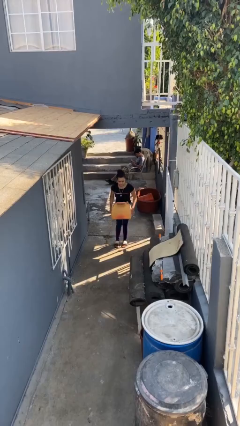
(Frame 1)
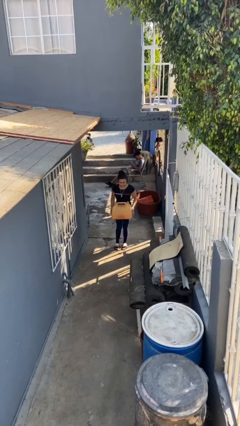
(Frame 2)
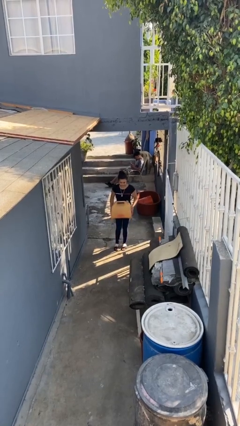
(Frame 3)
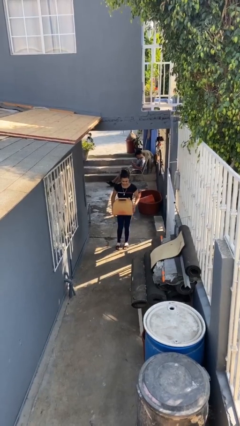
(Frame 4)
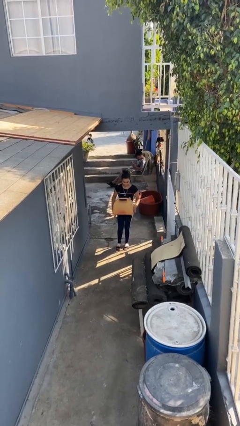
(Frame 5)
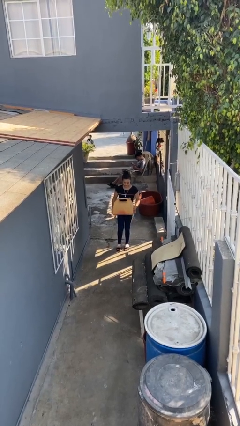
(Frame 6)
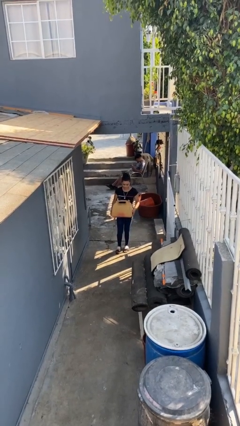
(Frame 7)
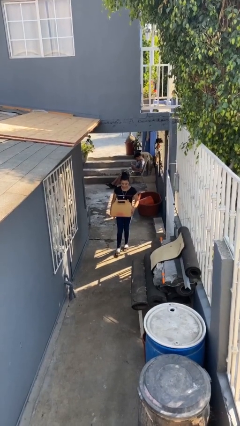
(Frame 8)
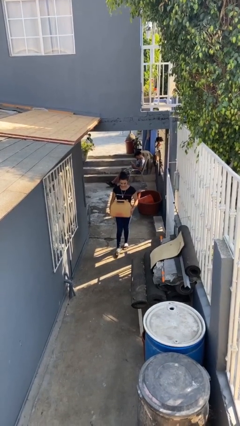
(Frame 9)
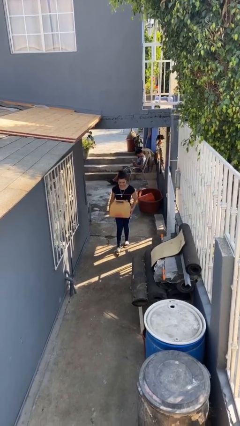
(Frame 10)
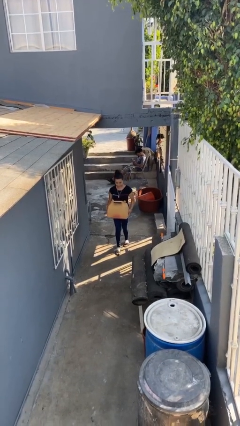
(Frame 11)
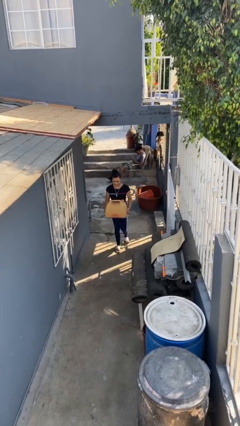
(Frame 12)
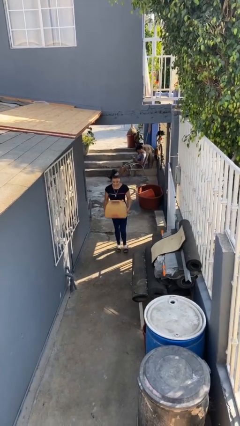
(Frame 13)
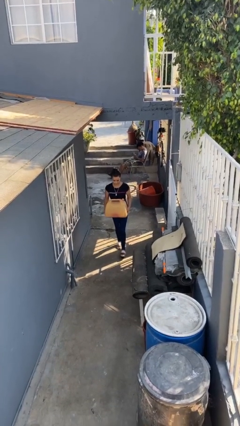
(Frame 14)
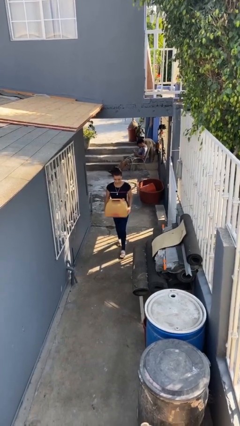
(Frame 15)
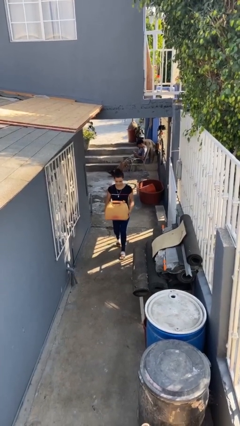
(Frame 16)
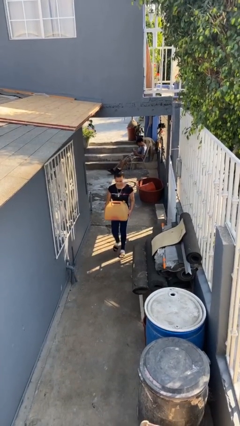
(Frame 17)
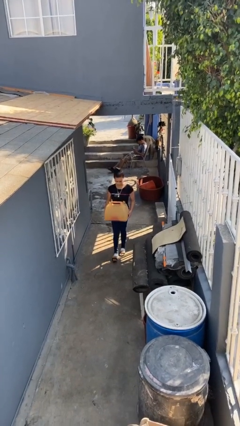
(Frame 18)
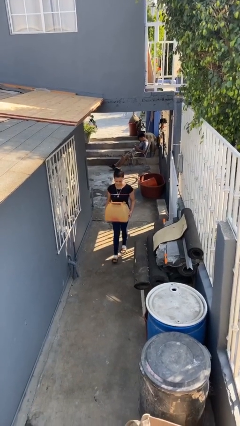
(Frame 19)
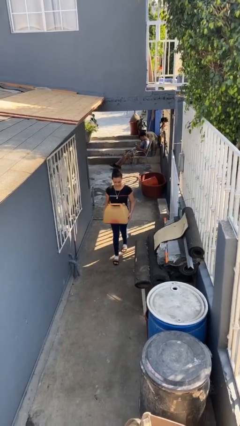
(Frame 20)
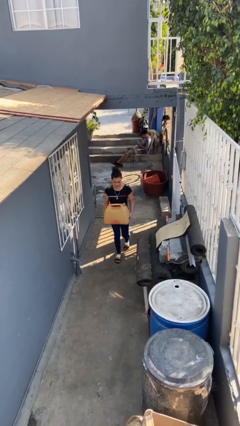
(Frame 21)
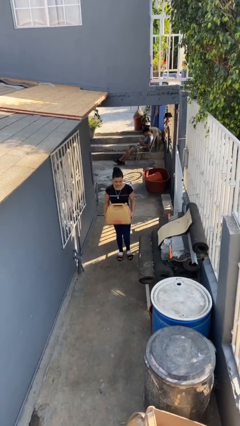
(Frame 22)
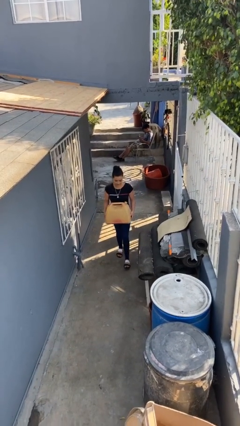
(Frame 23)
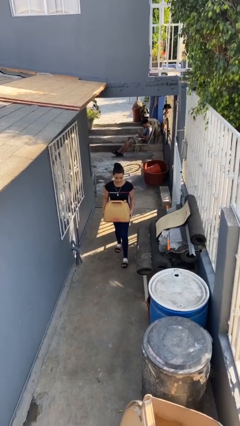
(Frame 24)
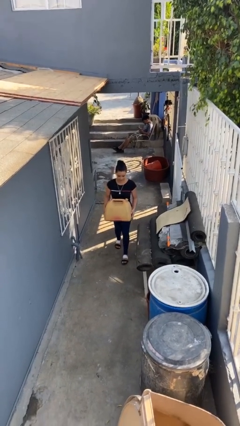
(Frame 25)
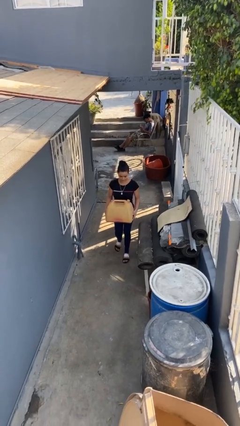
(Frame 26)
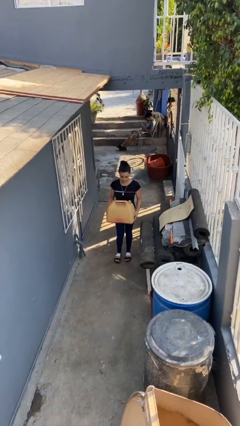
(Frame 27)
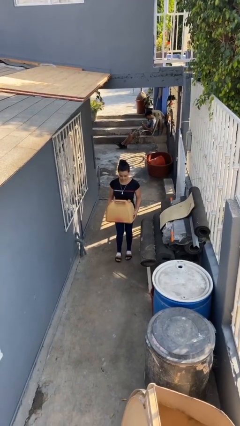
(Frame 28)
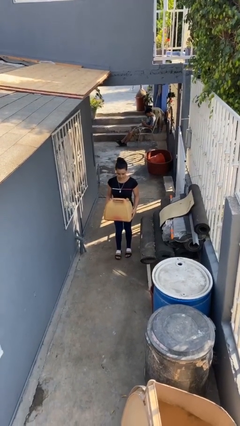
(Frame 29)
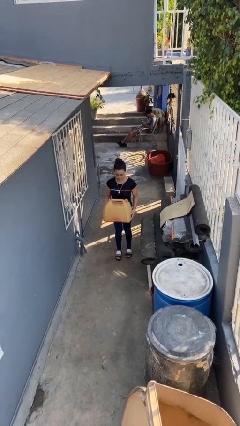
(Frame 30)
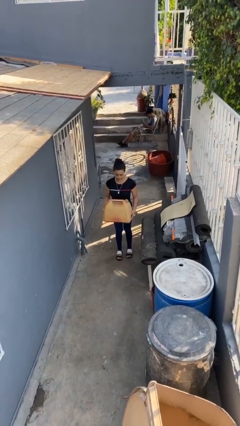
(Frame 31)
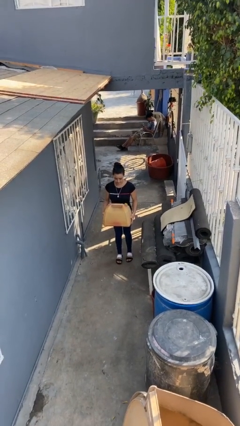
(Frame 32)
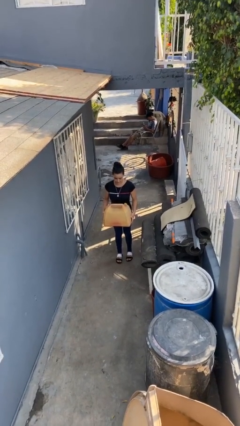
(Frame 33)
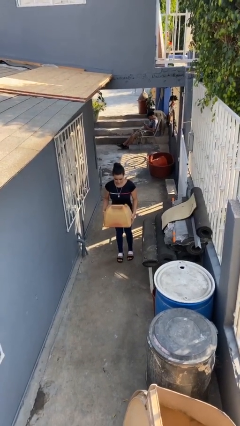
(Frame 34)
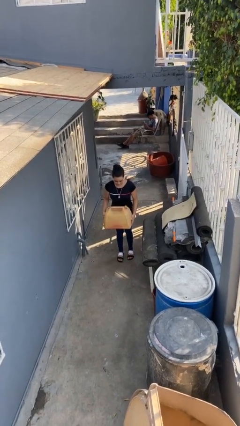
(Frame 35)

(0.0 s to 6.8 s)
person carries heavy object

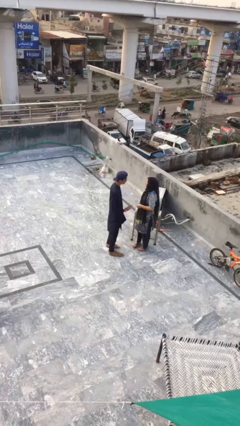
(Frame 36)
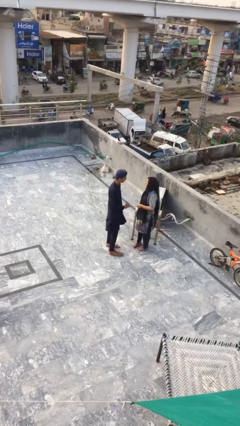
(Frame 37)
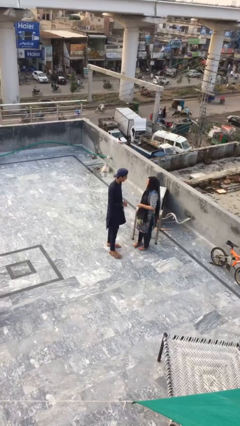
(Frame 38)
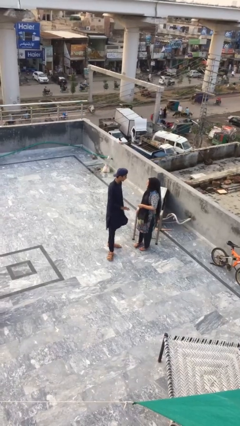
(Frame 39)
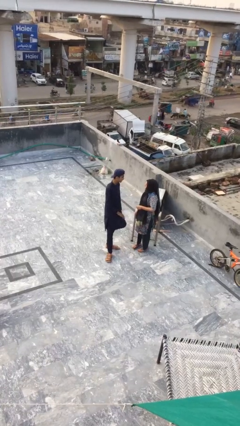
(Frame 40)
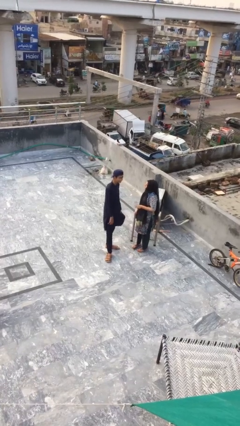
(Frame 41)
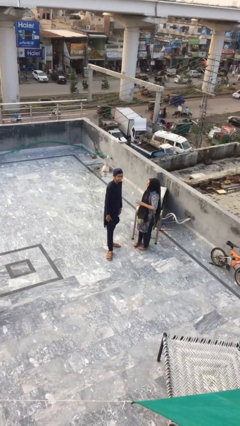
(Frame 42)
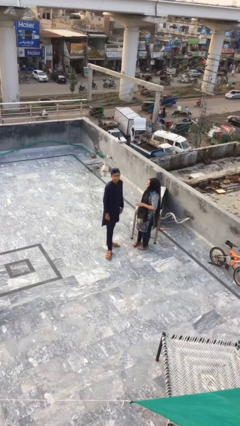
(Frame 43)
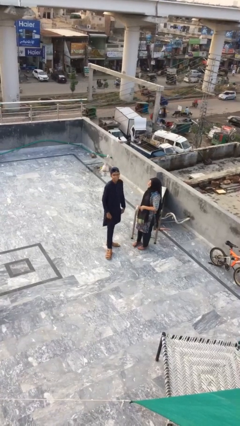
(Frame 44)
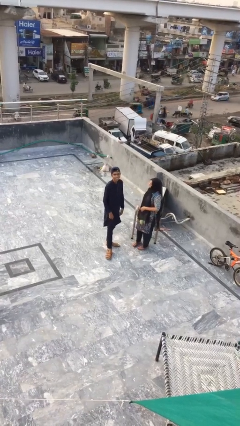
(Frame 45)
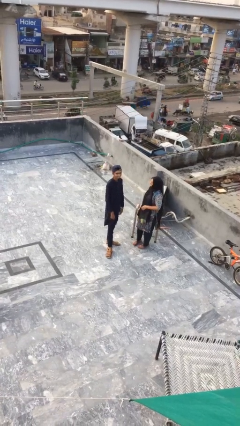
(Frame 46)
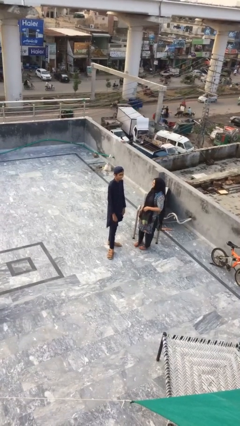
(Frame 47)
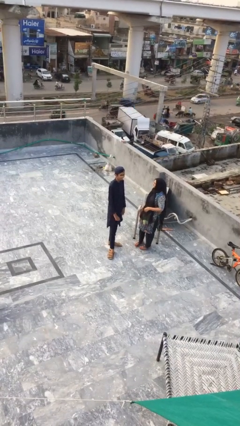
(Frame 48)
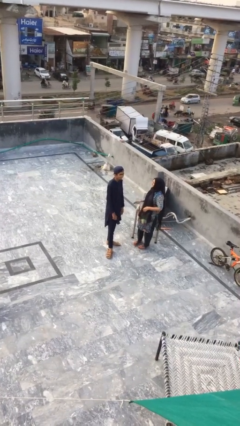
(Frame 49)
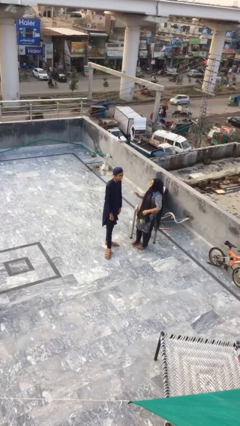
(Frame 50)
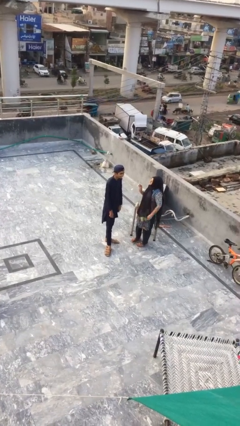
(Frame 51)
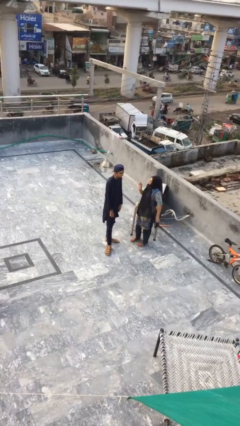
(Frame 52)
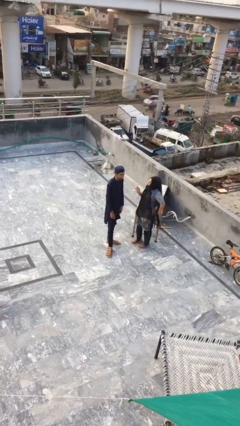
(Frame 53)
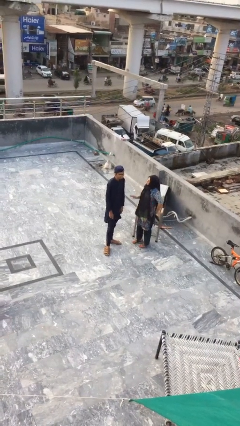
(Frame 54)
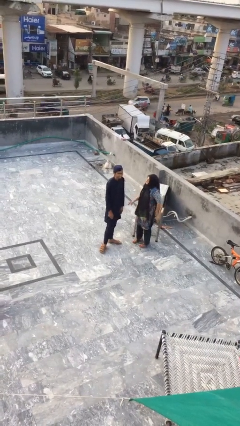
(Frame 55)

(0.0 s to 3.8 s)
person talks to person

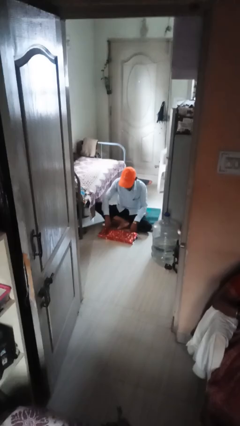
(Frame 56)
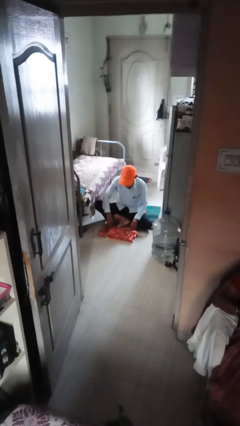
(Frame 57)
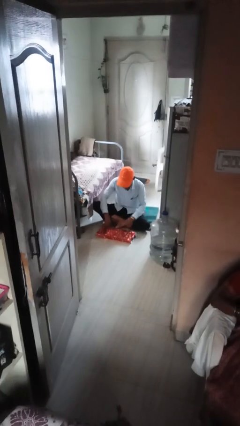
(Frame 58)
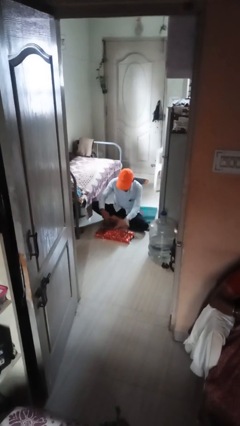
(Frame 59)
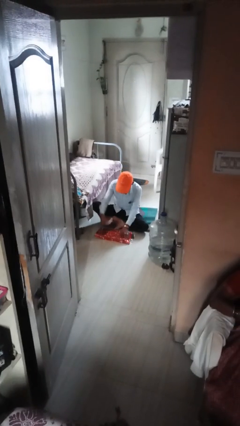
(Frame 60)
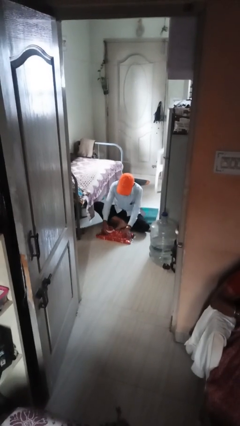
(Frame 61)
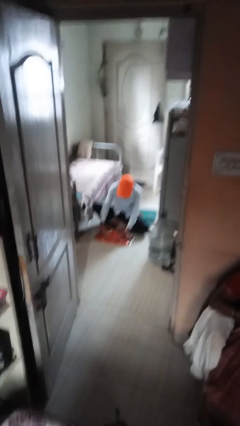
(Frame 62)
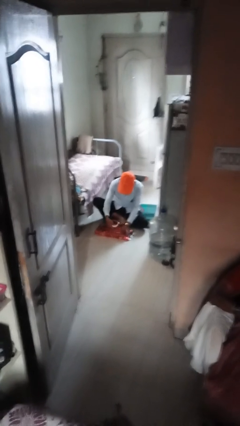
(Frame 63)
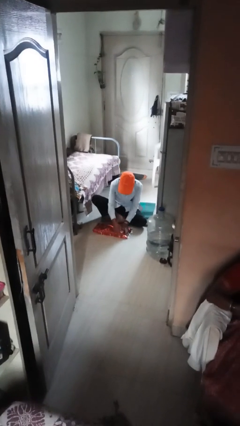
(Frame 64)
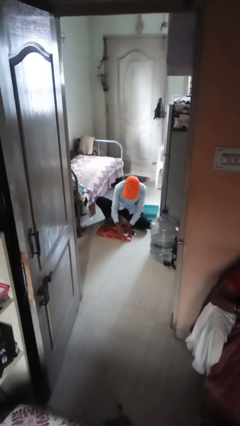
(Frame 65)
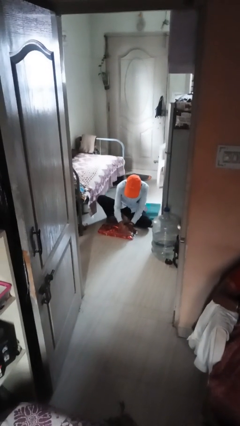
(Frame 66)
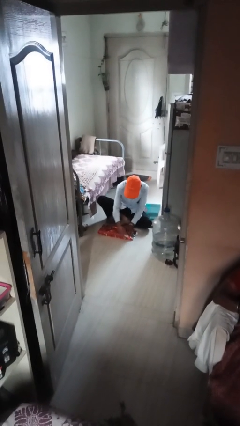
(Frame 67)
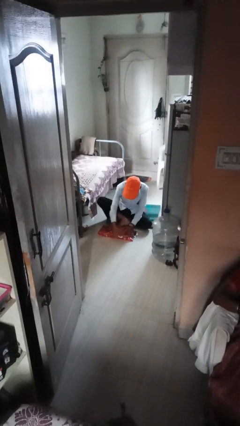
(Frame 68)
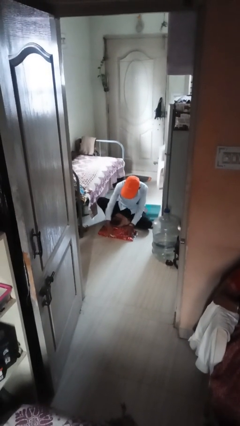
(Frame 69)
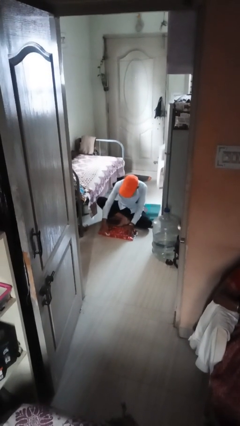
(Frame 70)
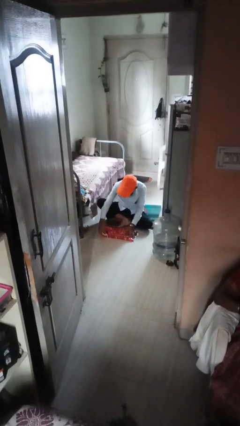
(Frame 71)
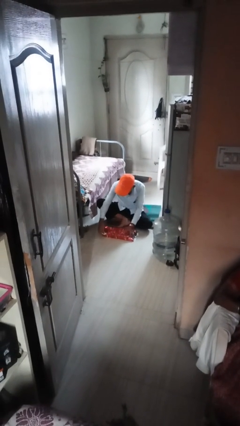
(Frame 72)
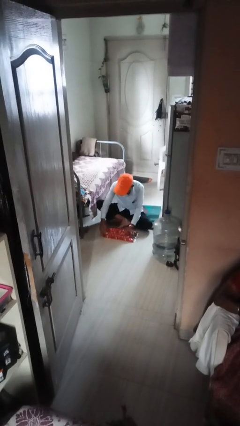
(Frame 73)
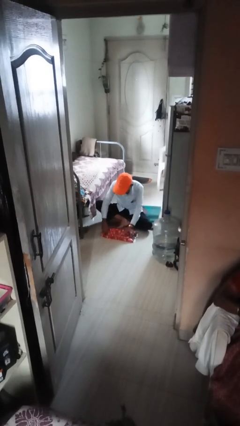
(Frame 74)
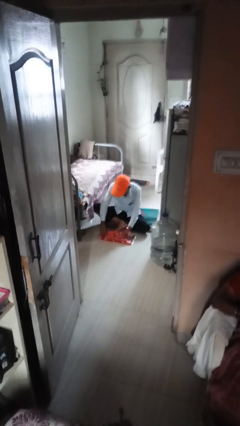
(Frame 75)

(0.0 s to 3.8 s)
person wraps box

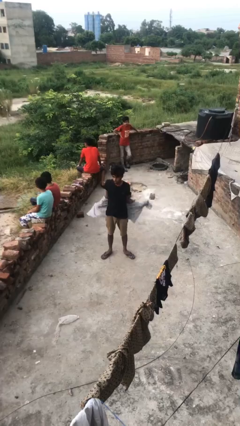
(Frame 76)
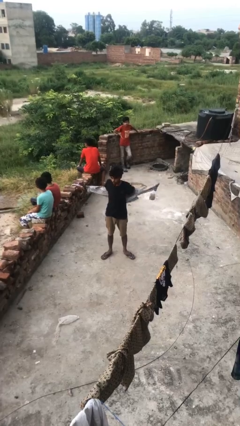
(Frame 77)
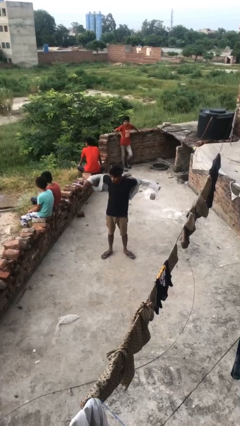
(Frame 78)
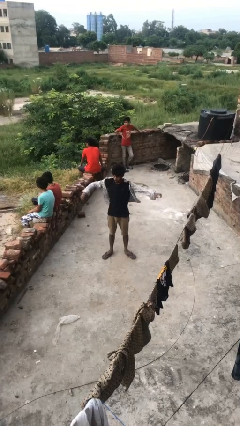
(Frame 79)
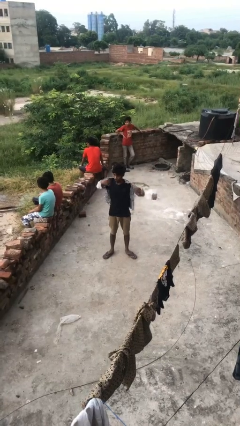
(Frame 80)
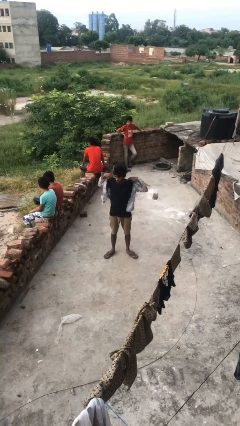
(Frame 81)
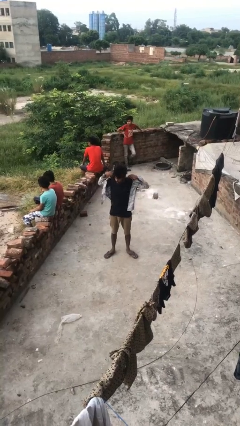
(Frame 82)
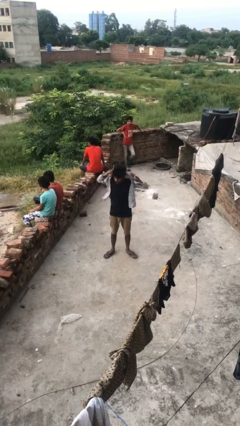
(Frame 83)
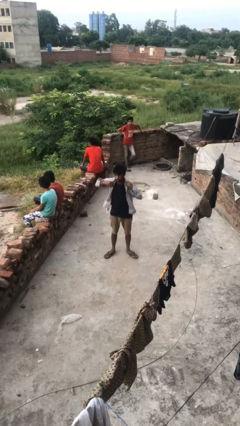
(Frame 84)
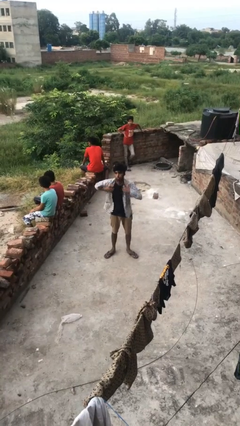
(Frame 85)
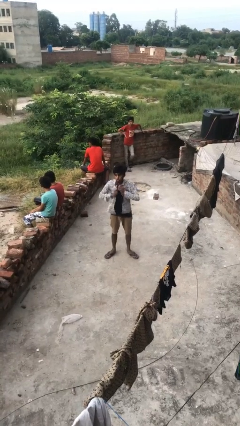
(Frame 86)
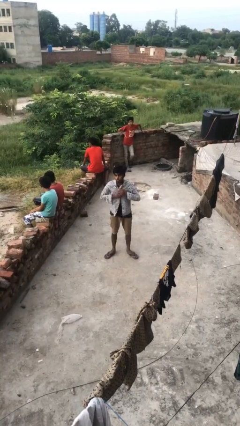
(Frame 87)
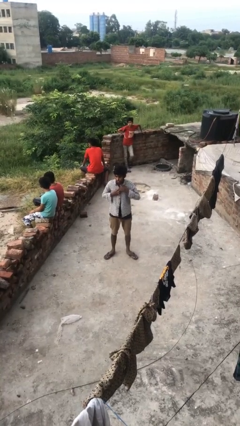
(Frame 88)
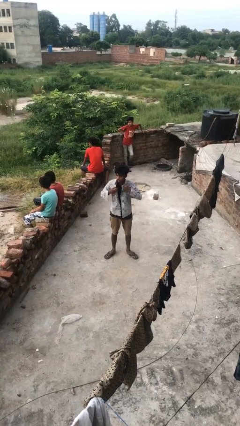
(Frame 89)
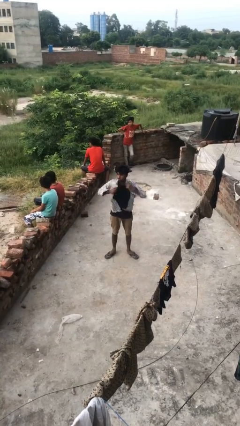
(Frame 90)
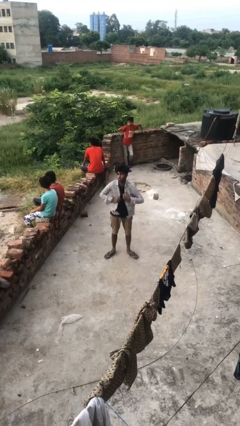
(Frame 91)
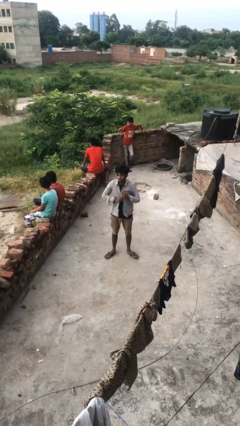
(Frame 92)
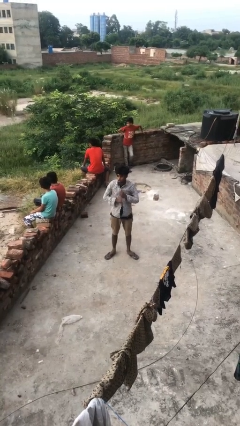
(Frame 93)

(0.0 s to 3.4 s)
person puts on shirt
